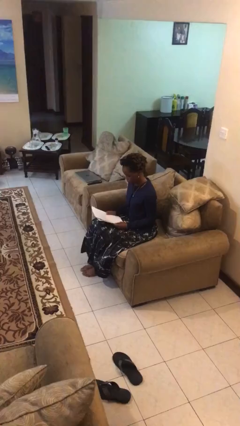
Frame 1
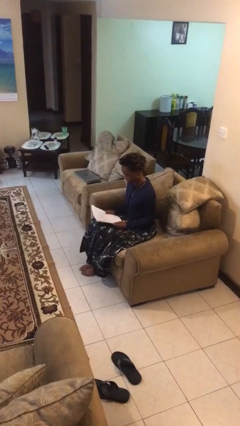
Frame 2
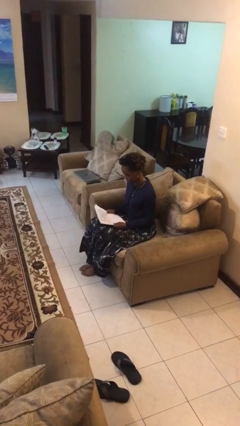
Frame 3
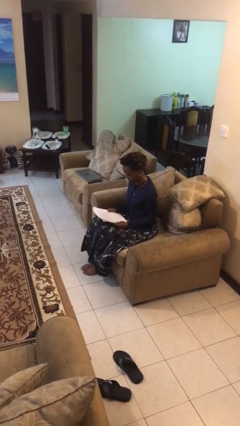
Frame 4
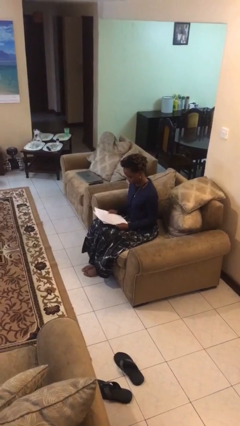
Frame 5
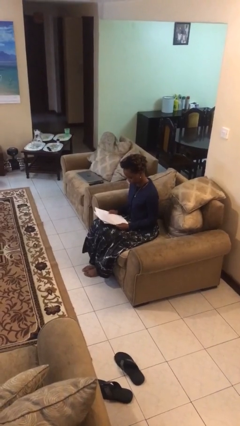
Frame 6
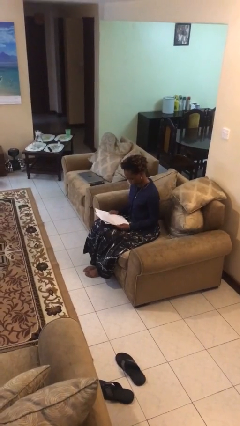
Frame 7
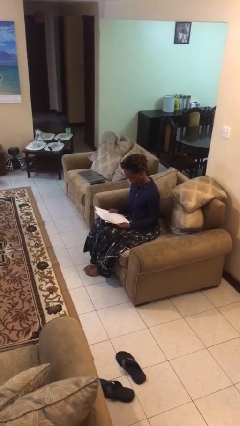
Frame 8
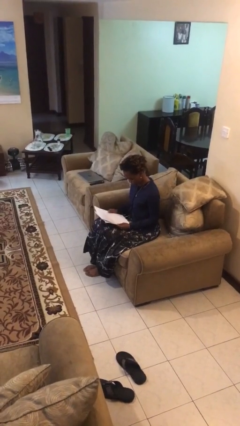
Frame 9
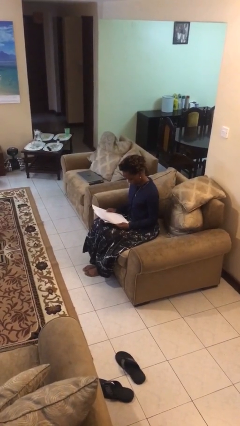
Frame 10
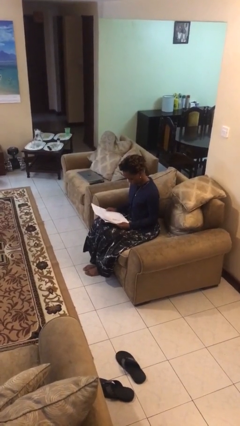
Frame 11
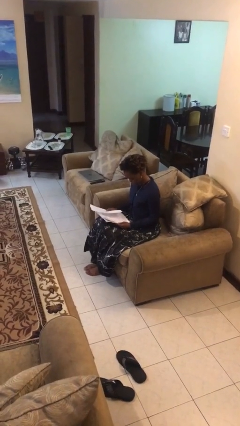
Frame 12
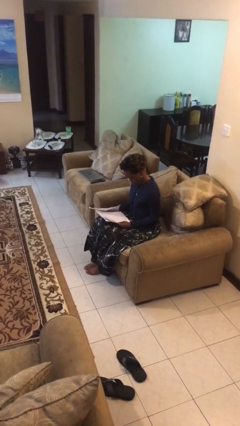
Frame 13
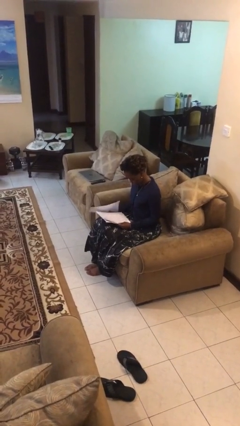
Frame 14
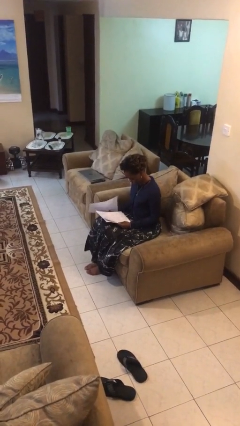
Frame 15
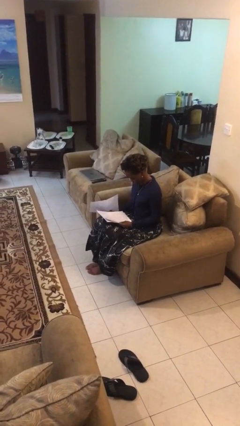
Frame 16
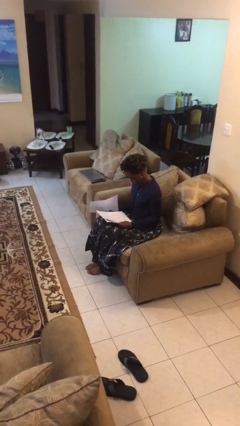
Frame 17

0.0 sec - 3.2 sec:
person reads document

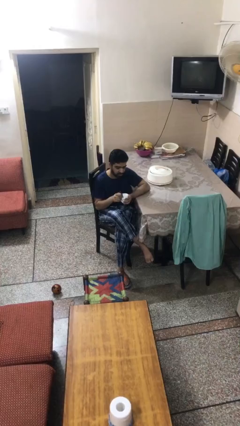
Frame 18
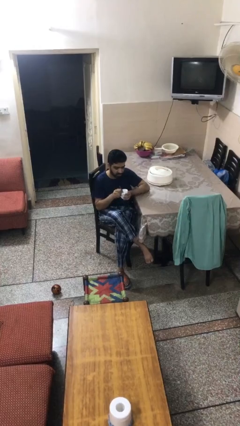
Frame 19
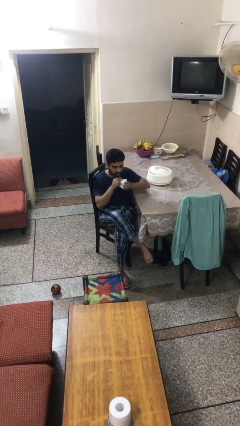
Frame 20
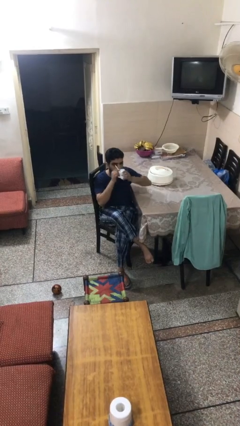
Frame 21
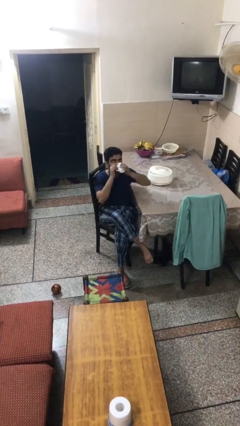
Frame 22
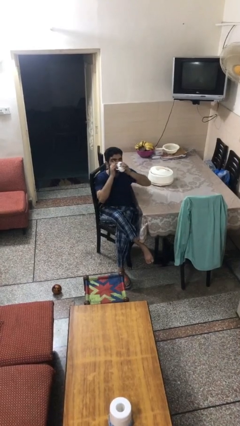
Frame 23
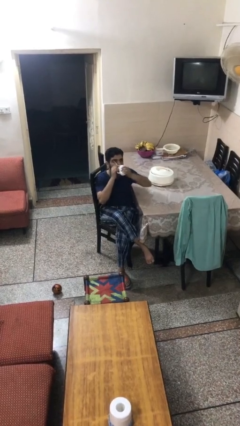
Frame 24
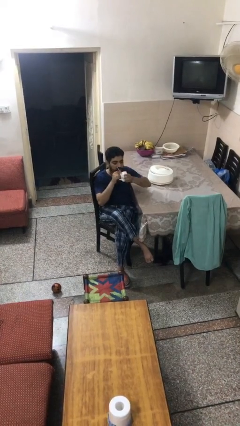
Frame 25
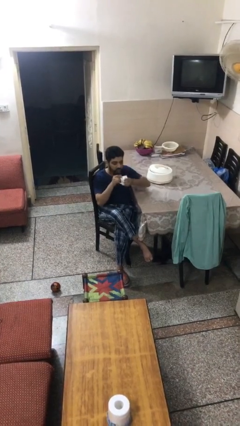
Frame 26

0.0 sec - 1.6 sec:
person drinks from mug

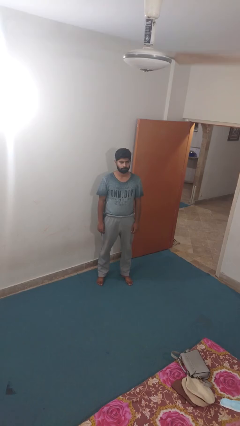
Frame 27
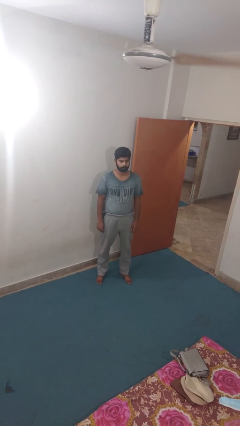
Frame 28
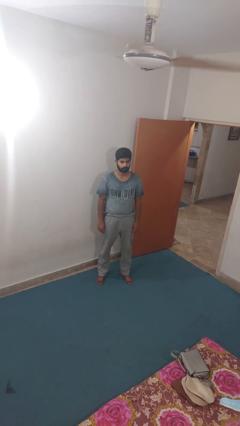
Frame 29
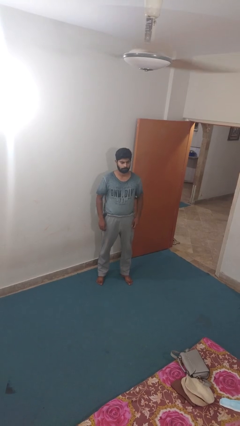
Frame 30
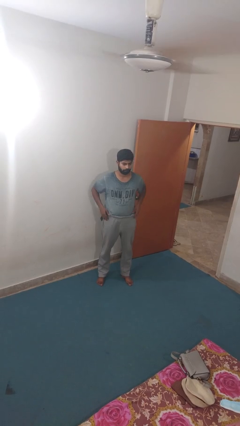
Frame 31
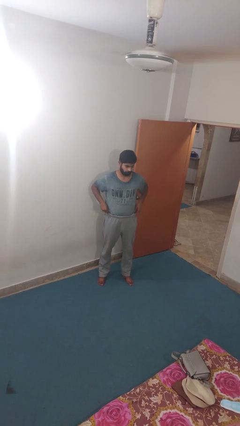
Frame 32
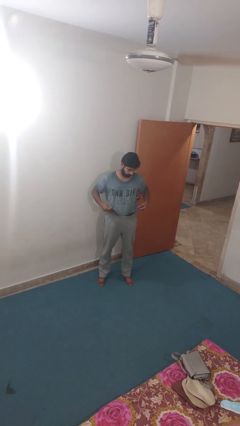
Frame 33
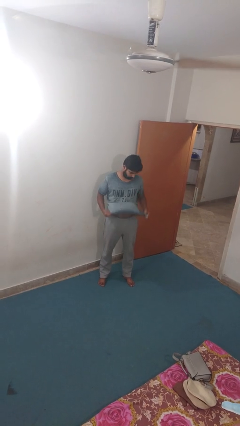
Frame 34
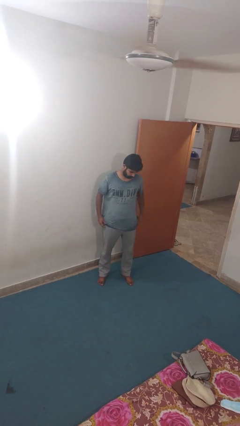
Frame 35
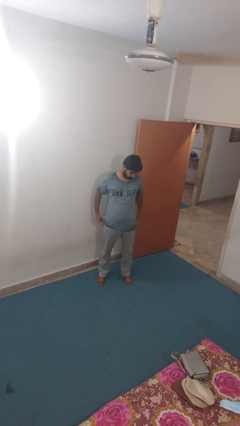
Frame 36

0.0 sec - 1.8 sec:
person untucks shirt

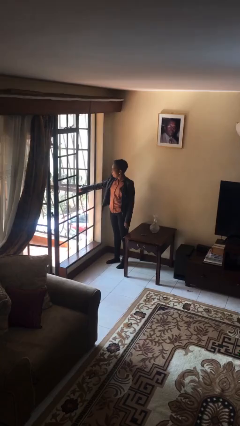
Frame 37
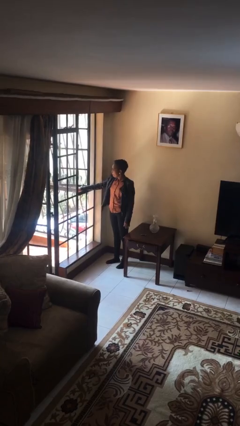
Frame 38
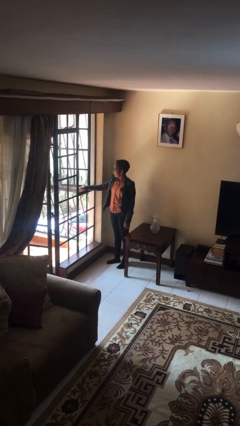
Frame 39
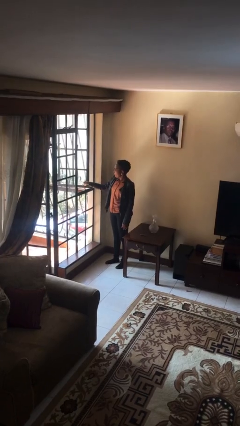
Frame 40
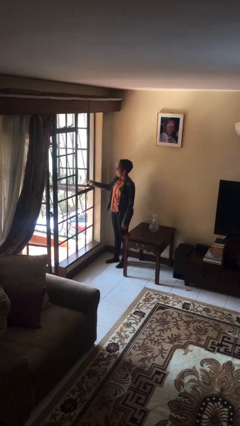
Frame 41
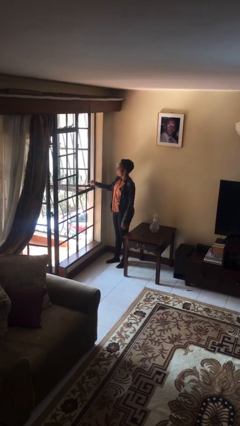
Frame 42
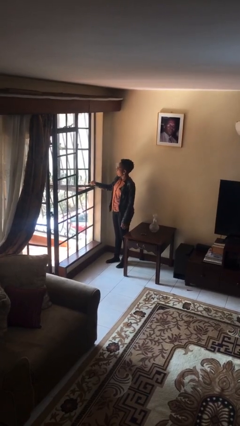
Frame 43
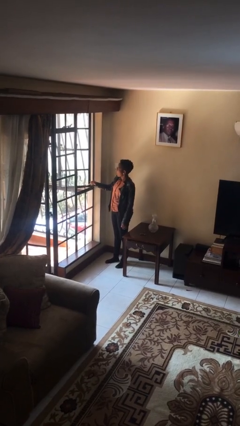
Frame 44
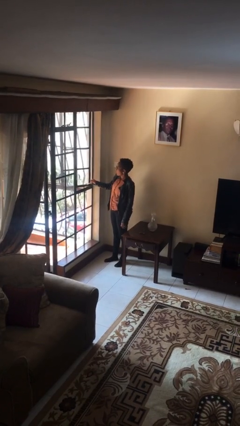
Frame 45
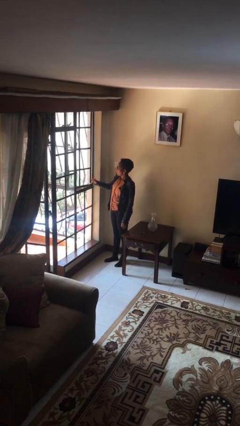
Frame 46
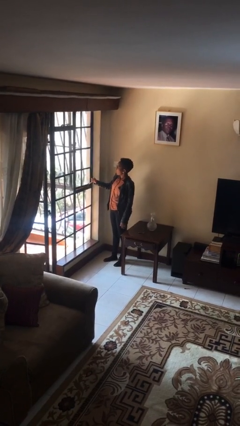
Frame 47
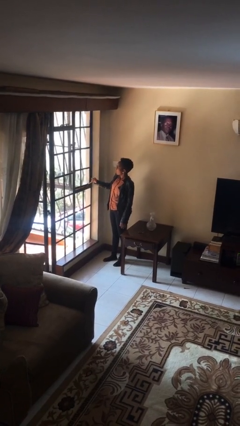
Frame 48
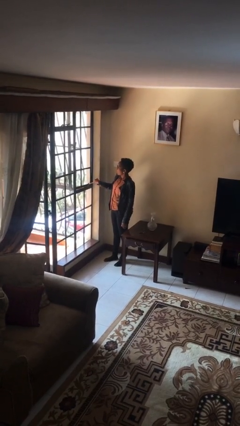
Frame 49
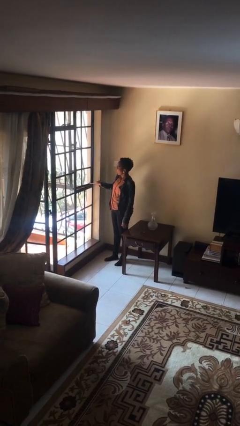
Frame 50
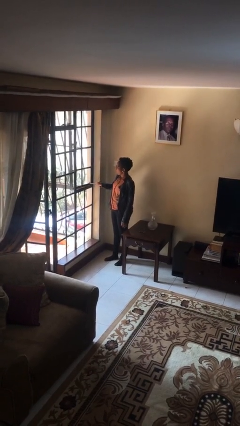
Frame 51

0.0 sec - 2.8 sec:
person closes home window

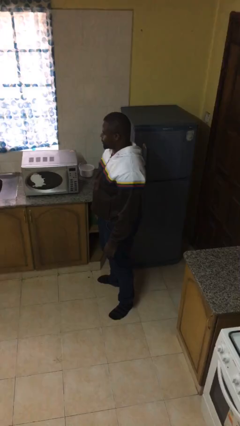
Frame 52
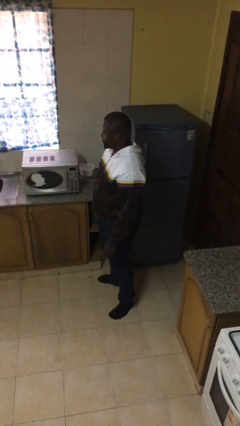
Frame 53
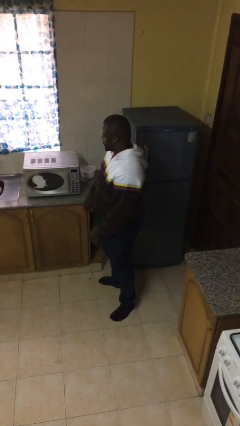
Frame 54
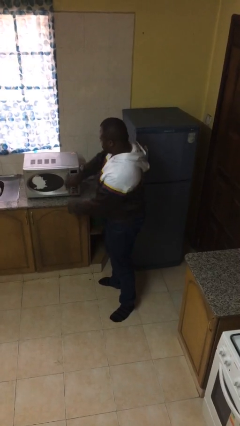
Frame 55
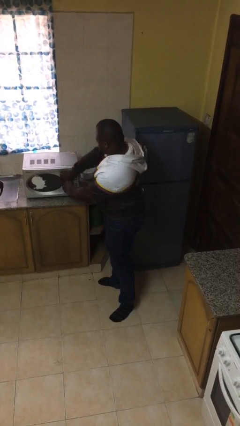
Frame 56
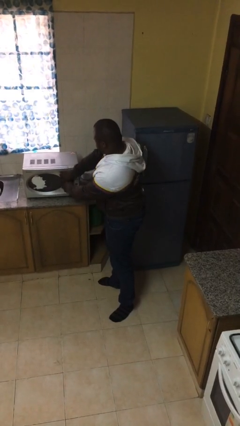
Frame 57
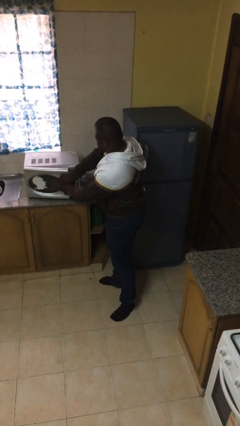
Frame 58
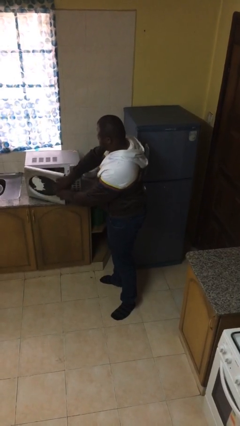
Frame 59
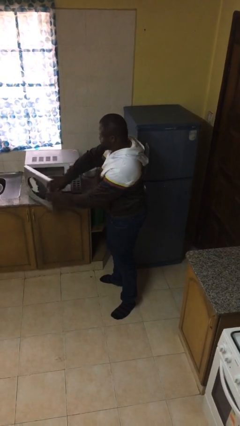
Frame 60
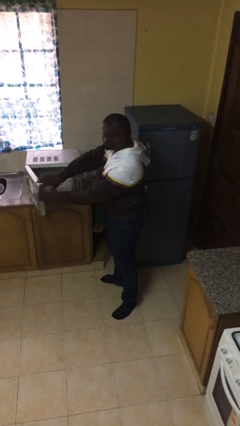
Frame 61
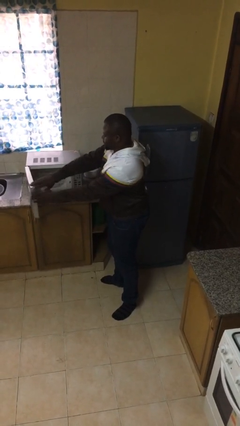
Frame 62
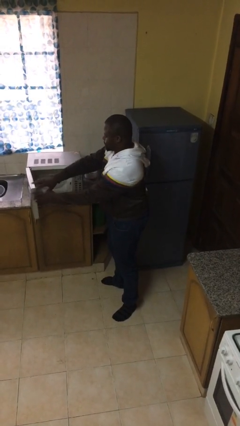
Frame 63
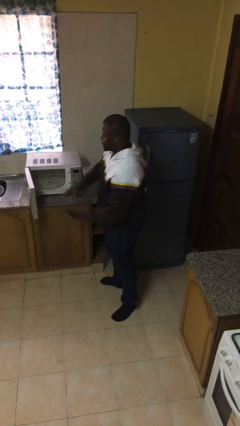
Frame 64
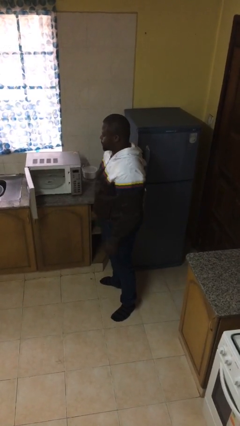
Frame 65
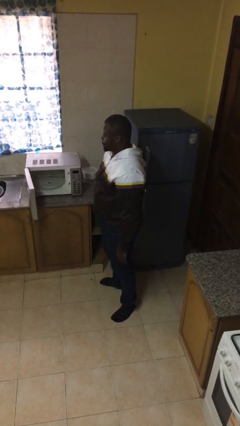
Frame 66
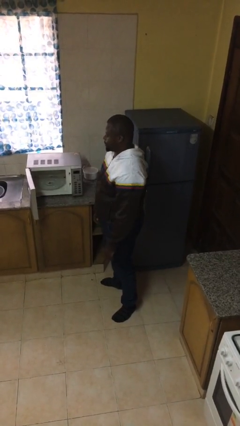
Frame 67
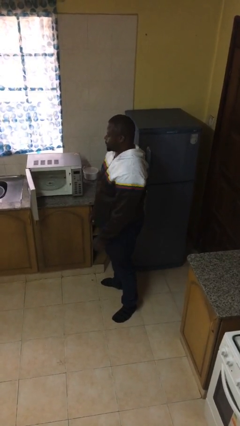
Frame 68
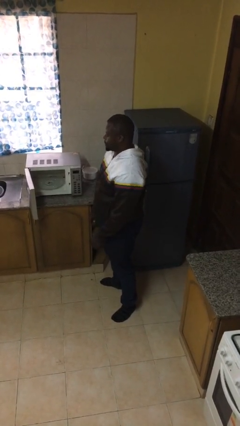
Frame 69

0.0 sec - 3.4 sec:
person opens microwave

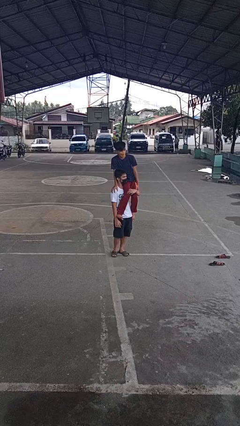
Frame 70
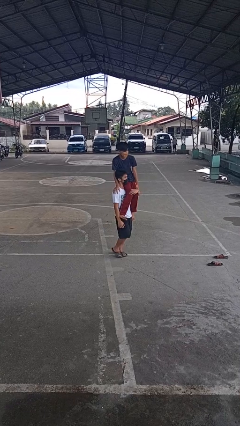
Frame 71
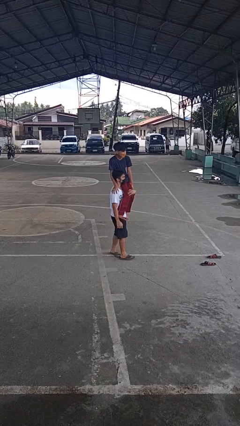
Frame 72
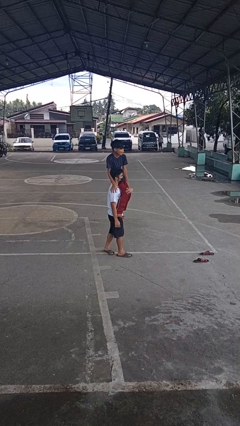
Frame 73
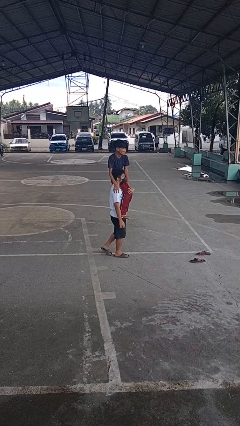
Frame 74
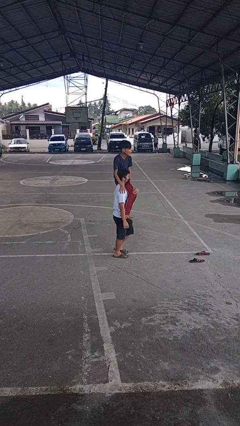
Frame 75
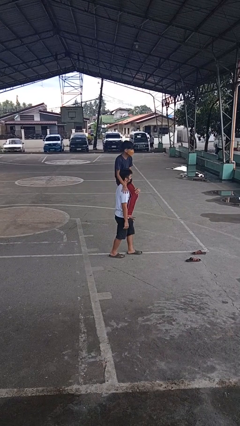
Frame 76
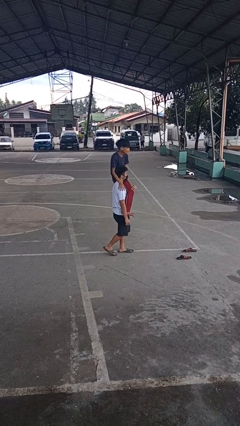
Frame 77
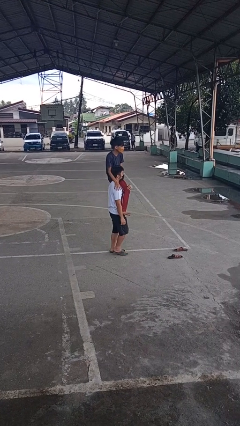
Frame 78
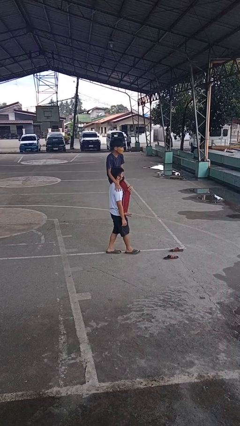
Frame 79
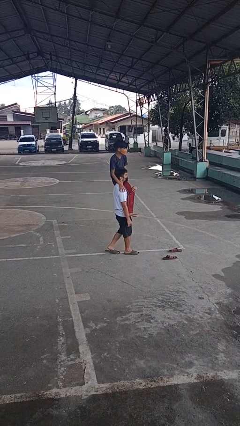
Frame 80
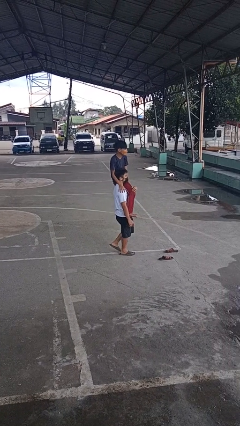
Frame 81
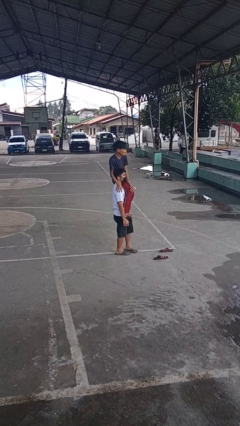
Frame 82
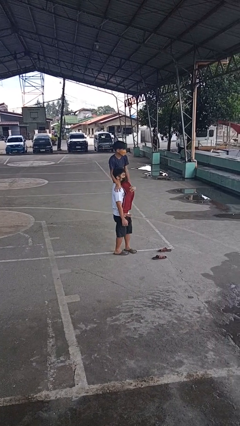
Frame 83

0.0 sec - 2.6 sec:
person carries person on shoulders

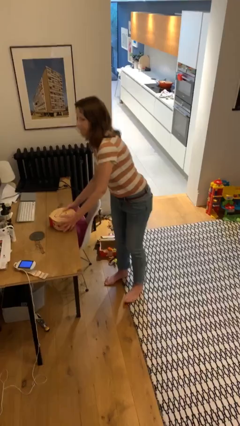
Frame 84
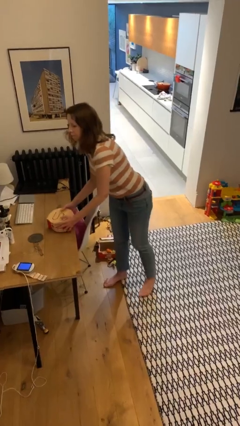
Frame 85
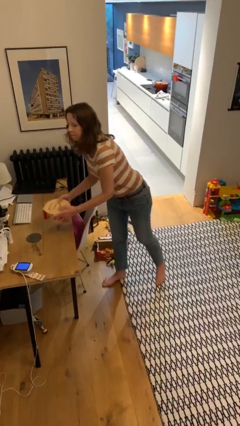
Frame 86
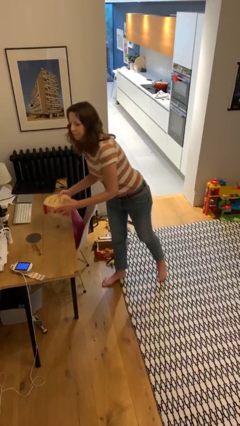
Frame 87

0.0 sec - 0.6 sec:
person picks up object from table

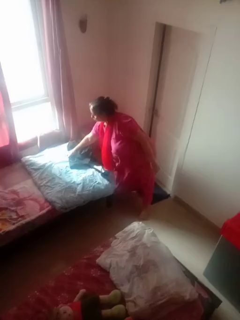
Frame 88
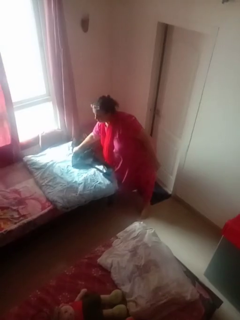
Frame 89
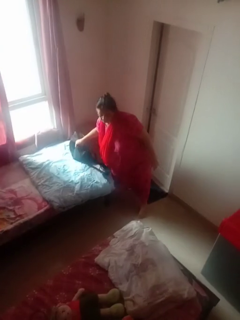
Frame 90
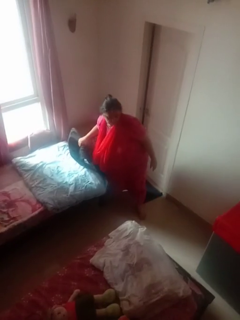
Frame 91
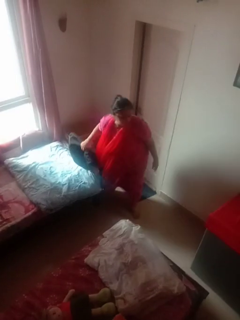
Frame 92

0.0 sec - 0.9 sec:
person picks up object from bed

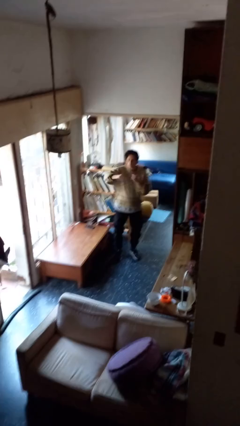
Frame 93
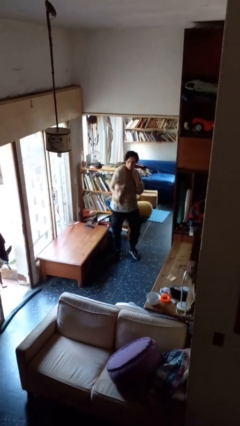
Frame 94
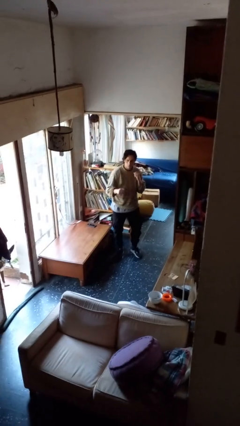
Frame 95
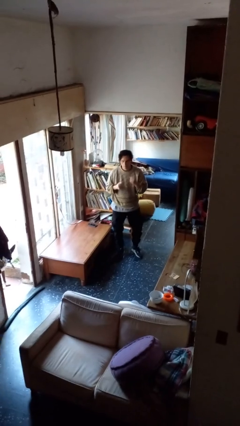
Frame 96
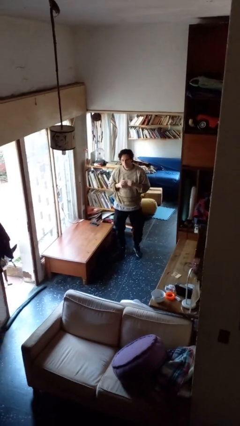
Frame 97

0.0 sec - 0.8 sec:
person karate chop
